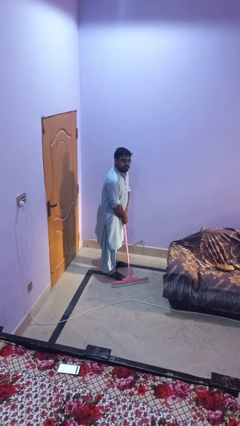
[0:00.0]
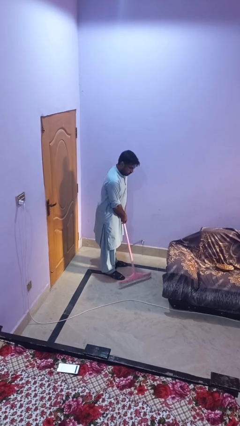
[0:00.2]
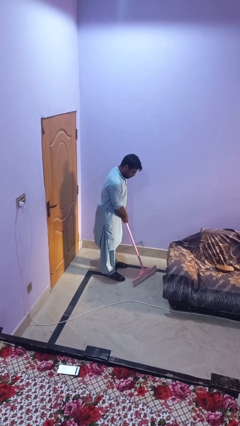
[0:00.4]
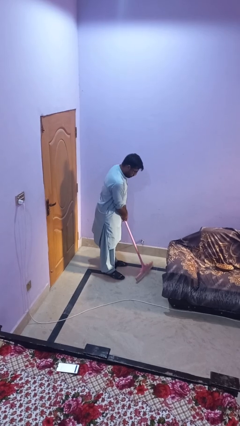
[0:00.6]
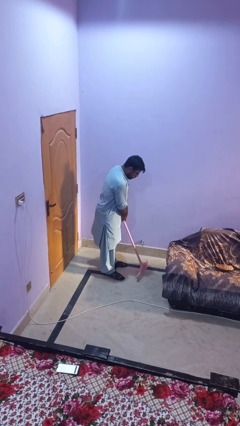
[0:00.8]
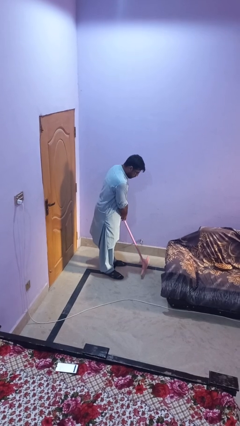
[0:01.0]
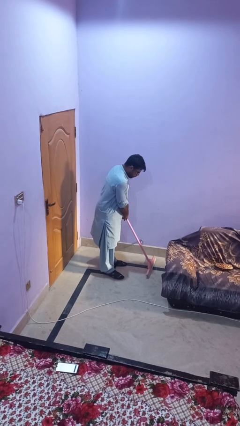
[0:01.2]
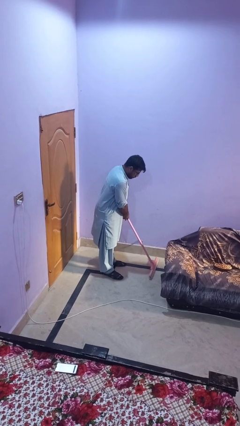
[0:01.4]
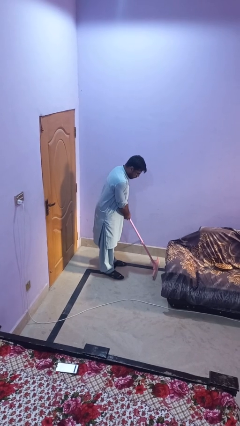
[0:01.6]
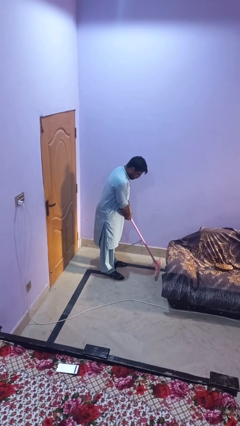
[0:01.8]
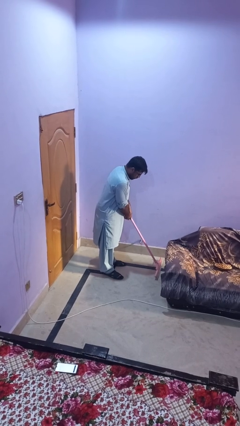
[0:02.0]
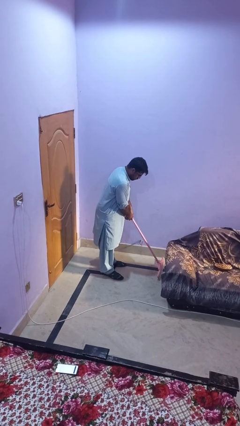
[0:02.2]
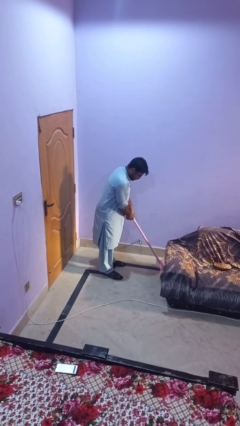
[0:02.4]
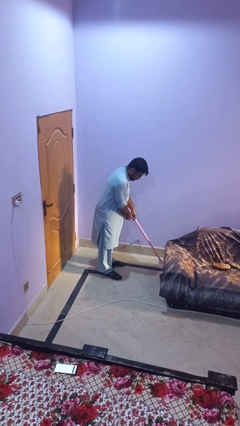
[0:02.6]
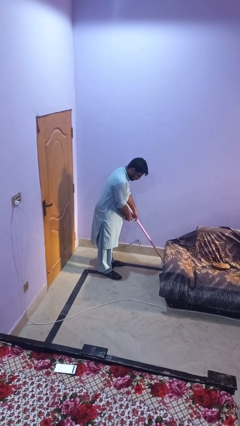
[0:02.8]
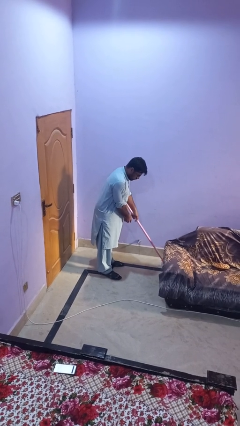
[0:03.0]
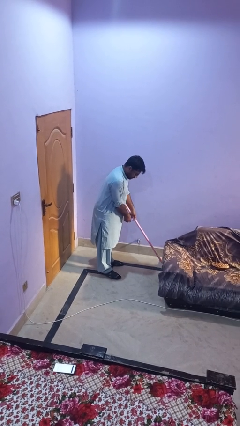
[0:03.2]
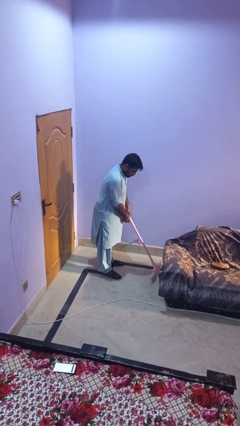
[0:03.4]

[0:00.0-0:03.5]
person vacuums carpet

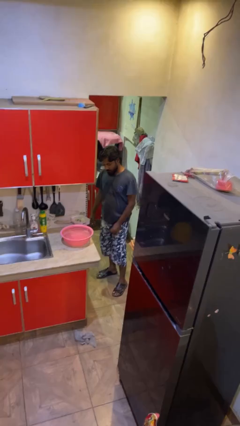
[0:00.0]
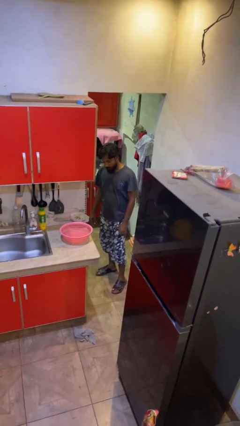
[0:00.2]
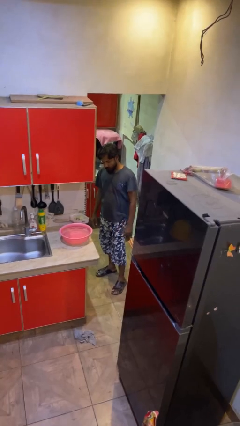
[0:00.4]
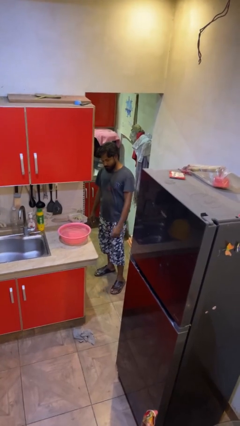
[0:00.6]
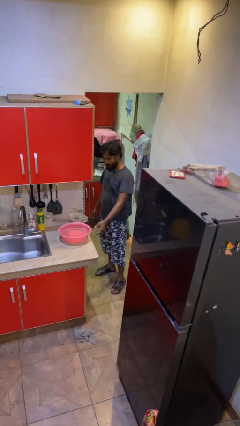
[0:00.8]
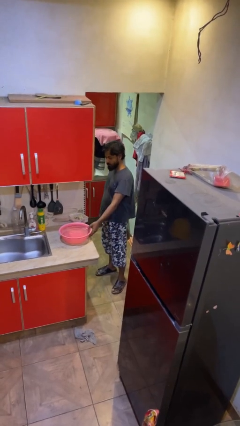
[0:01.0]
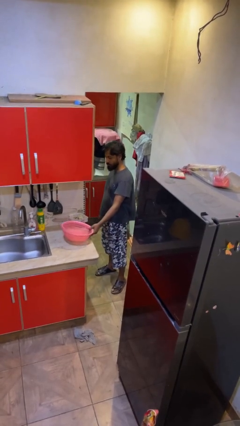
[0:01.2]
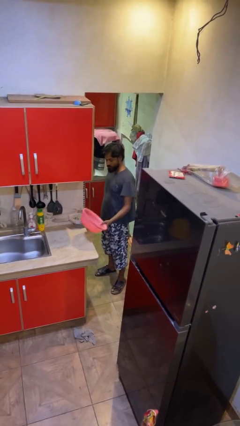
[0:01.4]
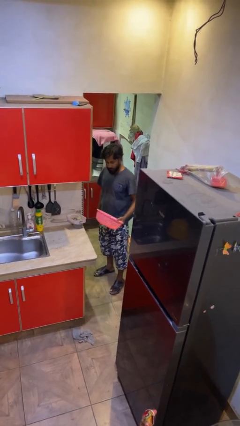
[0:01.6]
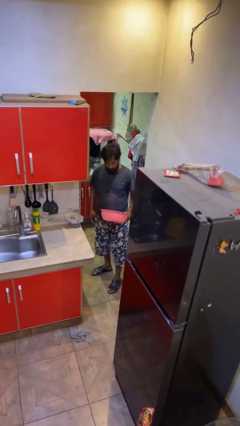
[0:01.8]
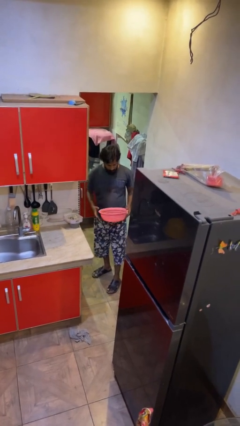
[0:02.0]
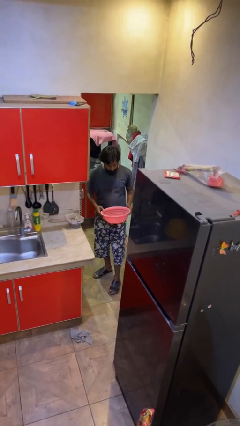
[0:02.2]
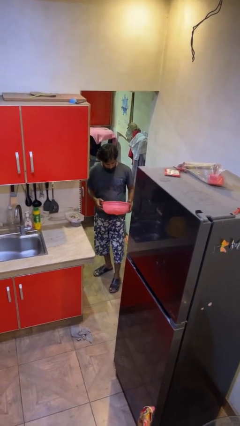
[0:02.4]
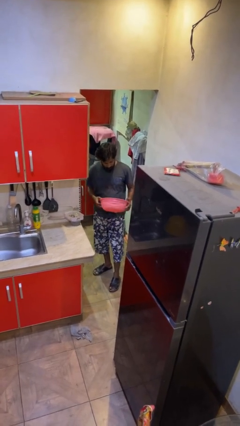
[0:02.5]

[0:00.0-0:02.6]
person picks up object from countertop

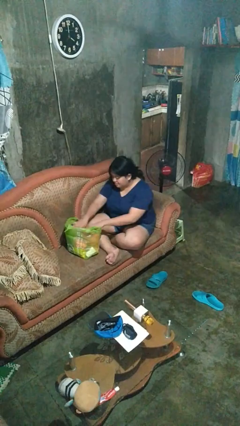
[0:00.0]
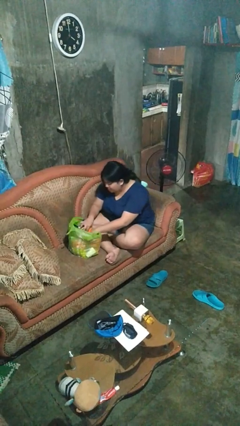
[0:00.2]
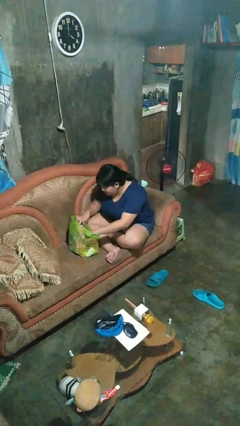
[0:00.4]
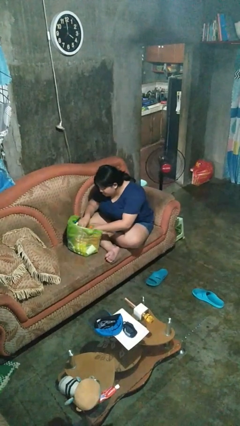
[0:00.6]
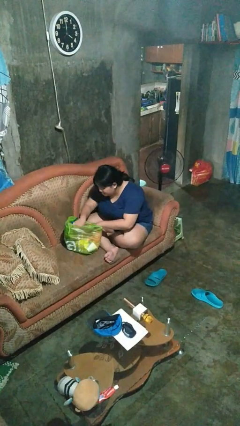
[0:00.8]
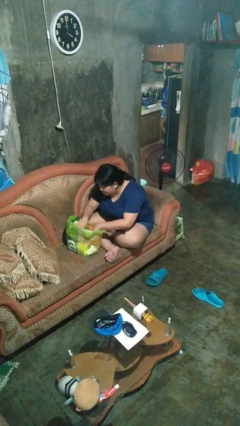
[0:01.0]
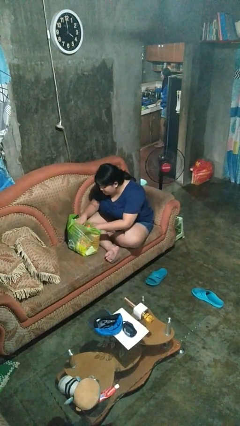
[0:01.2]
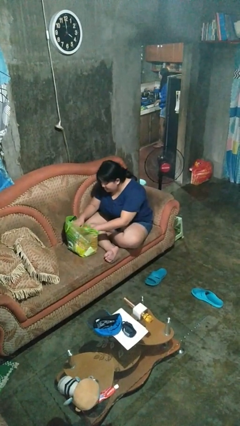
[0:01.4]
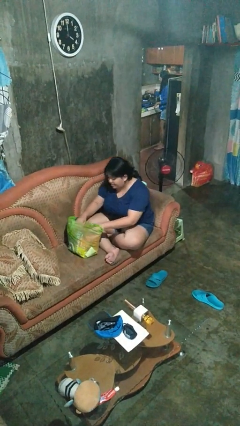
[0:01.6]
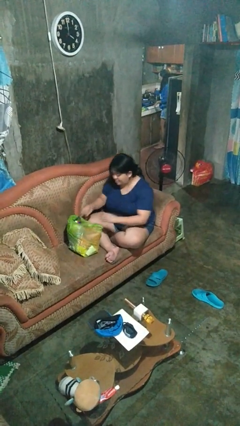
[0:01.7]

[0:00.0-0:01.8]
person searches in bag

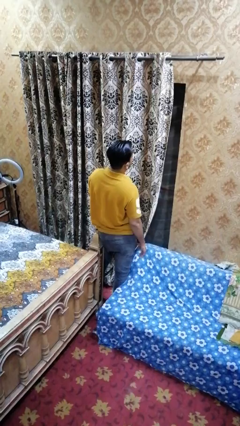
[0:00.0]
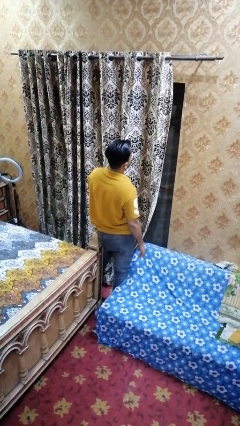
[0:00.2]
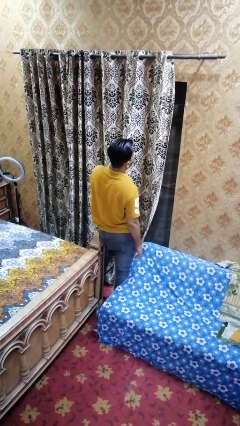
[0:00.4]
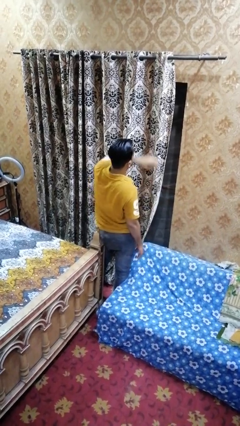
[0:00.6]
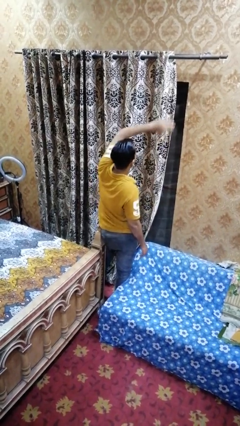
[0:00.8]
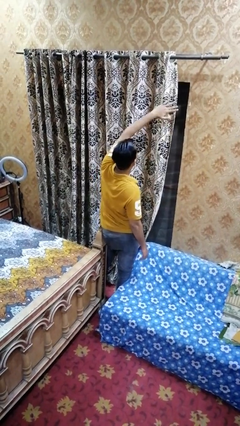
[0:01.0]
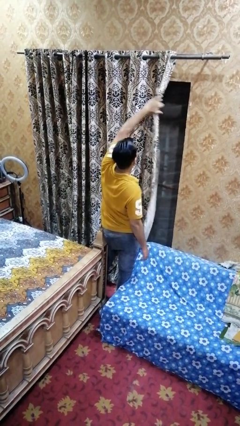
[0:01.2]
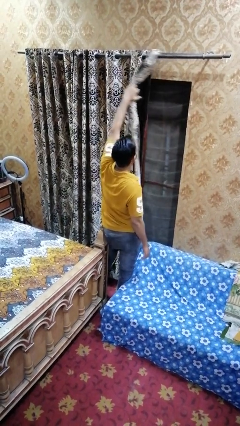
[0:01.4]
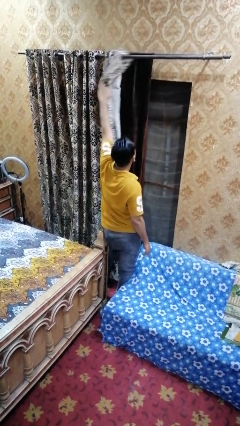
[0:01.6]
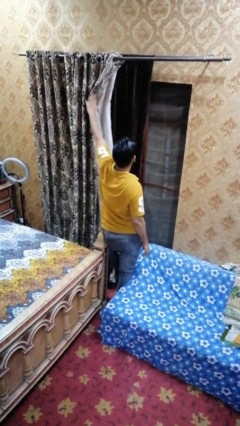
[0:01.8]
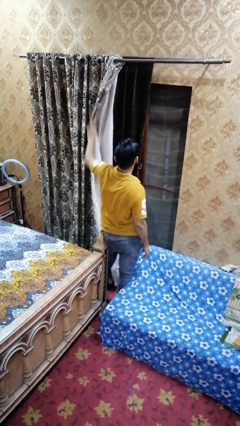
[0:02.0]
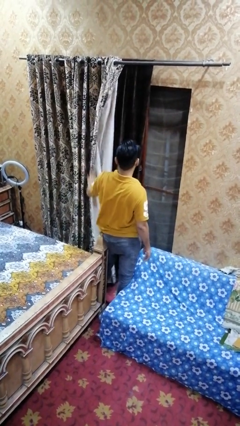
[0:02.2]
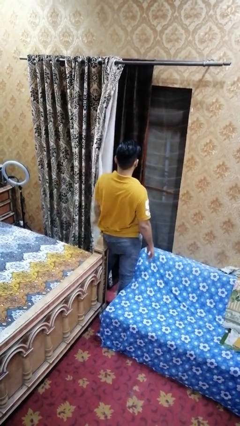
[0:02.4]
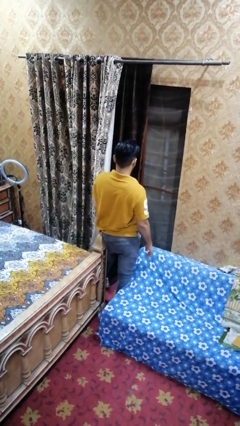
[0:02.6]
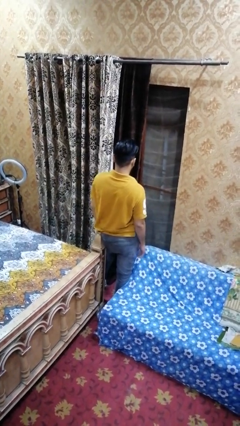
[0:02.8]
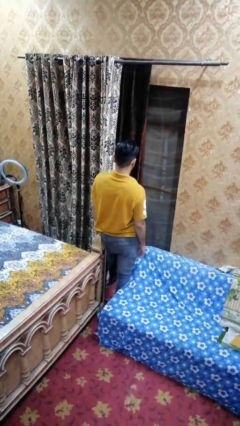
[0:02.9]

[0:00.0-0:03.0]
person opens curtains

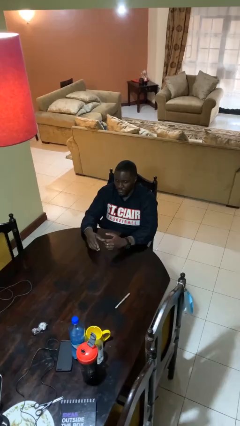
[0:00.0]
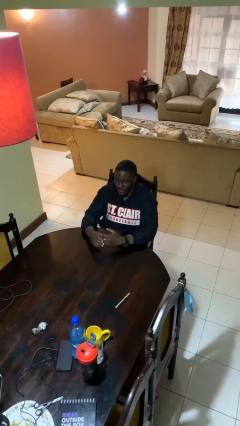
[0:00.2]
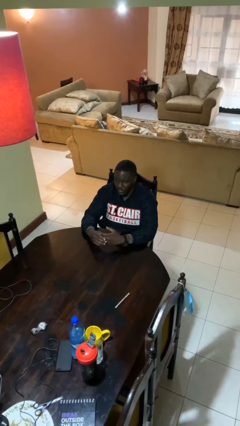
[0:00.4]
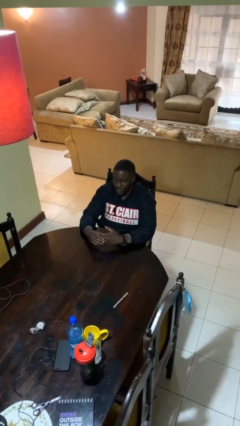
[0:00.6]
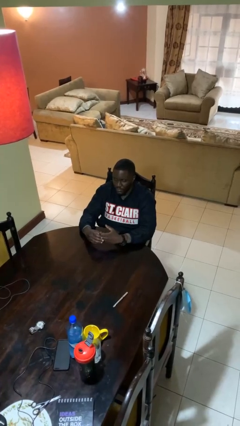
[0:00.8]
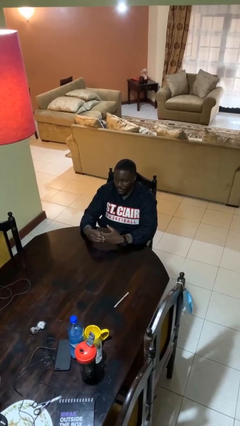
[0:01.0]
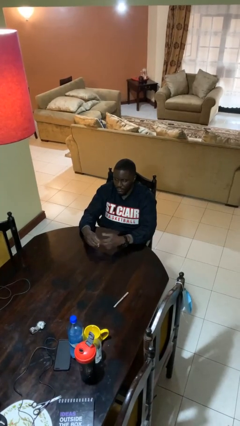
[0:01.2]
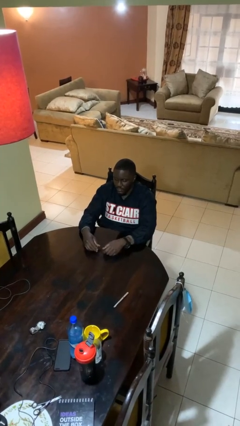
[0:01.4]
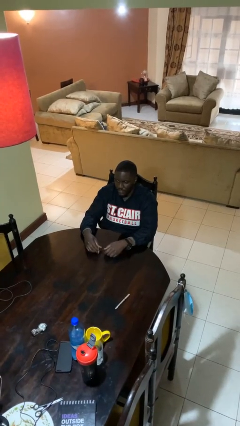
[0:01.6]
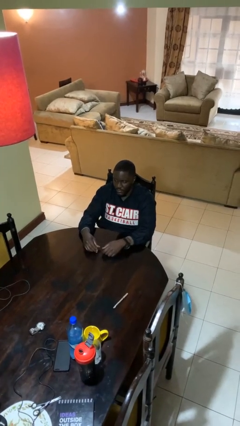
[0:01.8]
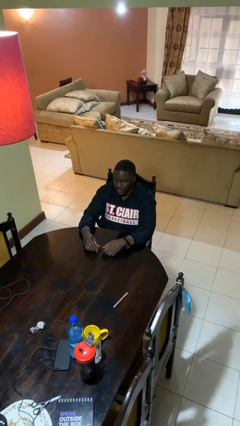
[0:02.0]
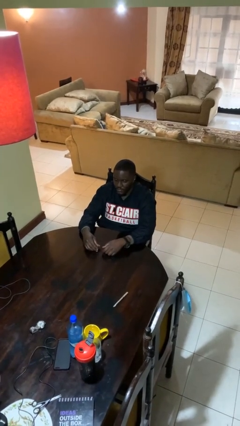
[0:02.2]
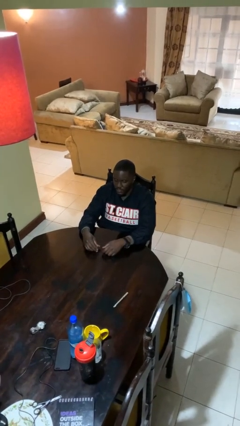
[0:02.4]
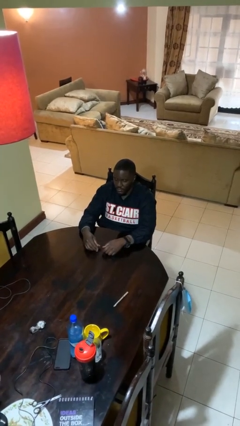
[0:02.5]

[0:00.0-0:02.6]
person takes off ring

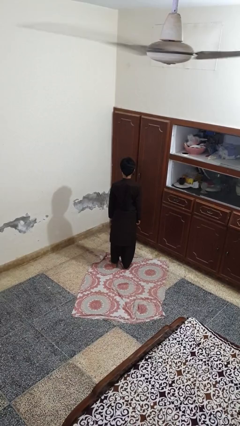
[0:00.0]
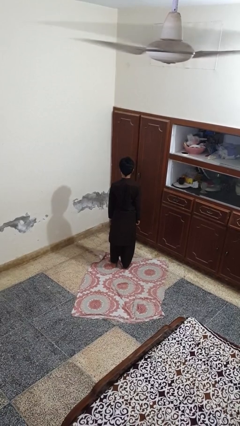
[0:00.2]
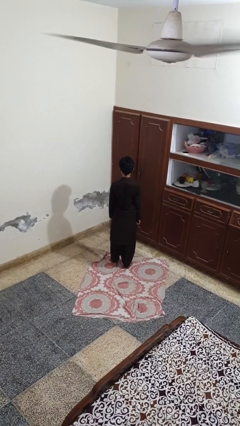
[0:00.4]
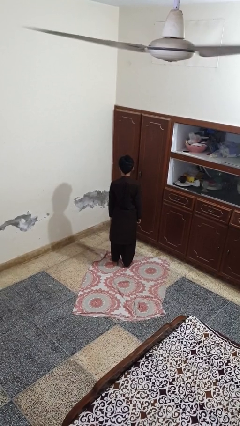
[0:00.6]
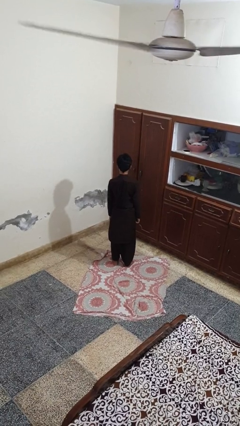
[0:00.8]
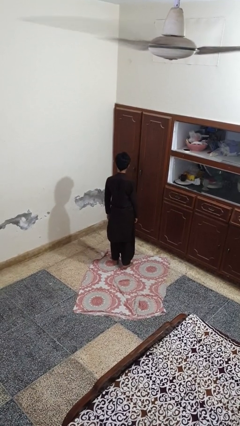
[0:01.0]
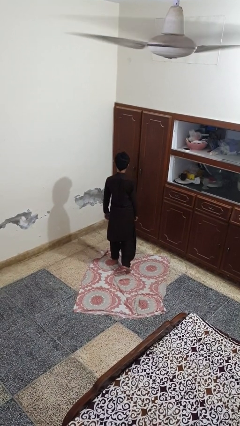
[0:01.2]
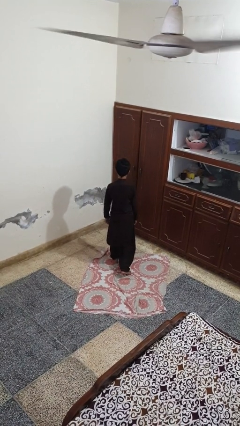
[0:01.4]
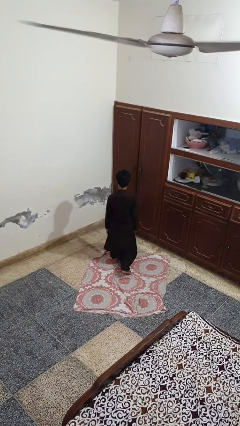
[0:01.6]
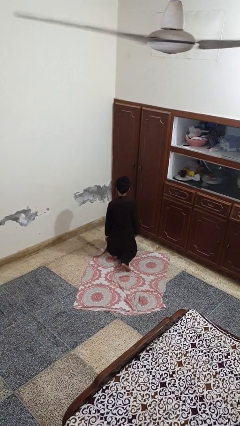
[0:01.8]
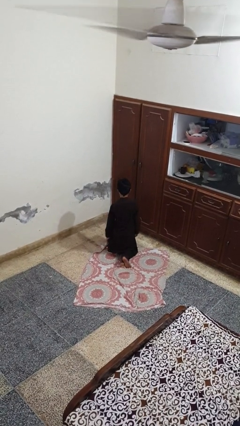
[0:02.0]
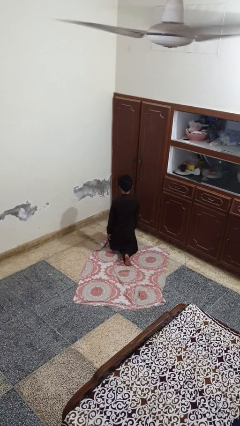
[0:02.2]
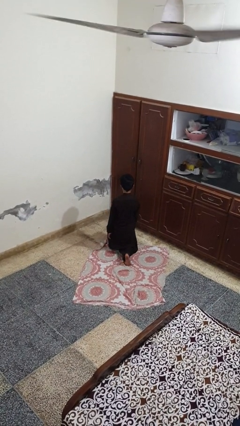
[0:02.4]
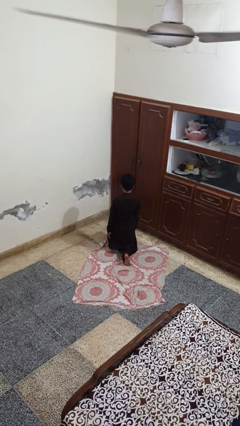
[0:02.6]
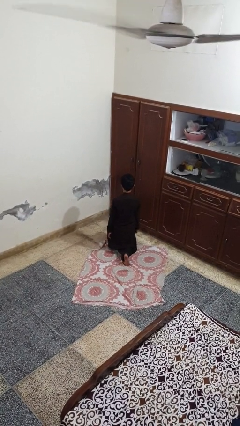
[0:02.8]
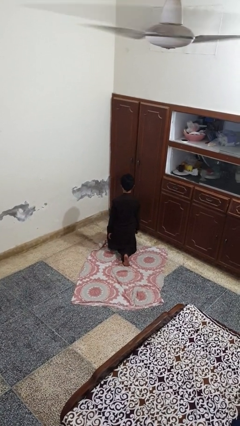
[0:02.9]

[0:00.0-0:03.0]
person kneels

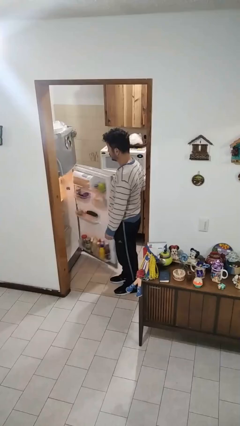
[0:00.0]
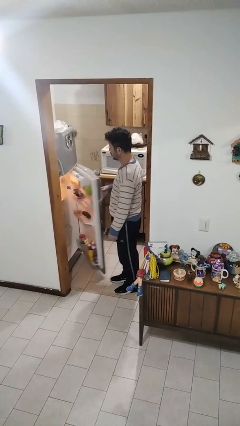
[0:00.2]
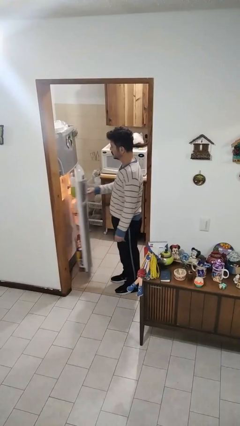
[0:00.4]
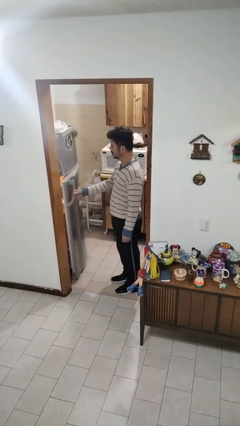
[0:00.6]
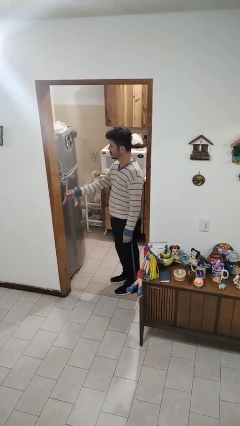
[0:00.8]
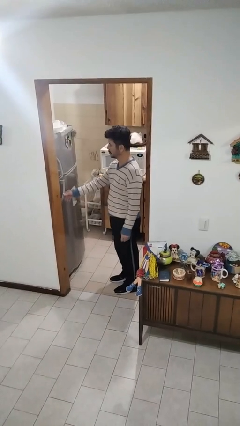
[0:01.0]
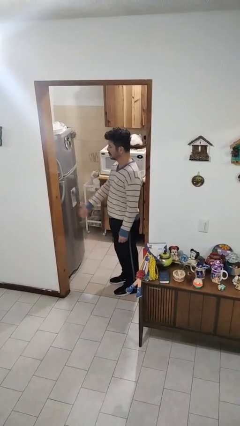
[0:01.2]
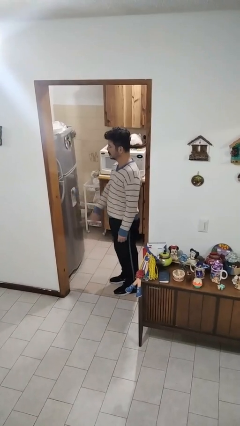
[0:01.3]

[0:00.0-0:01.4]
person closes refrigerator
